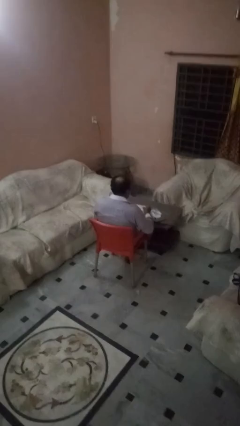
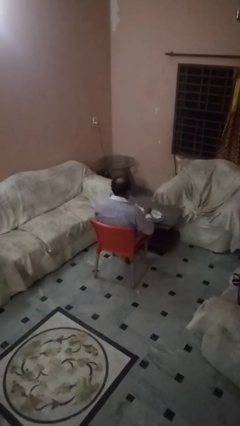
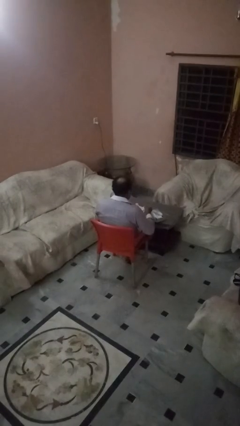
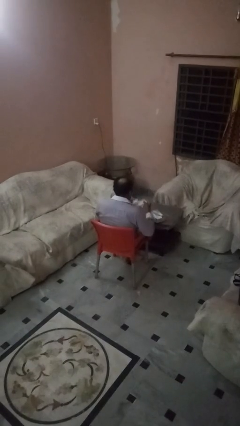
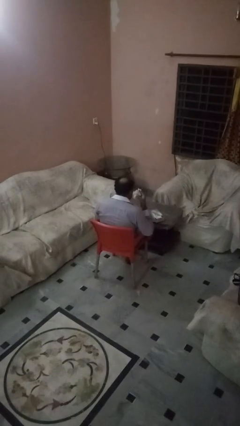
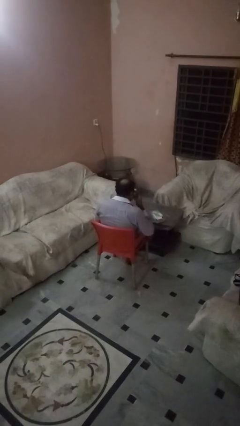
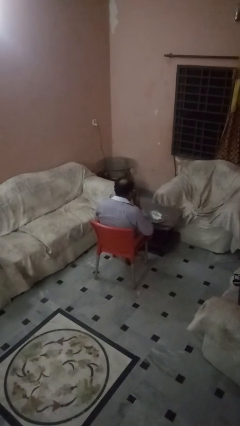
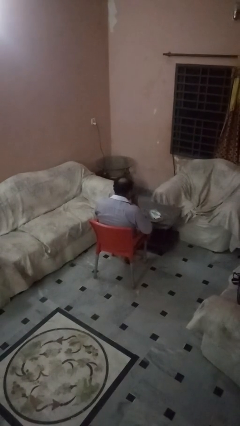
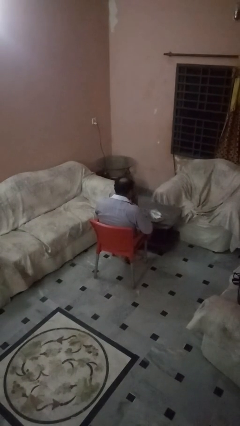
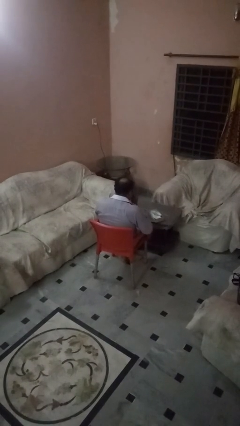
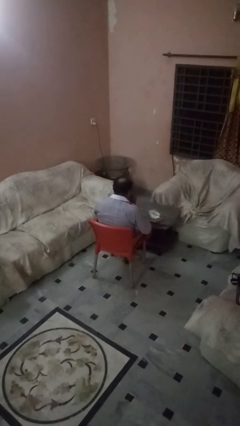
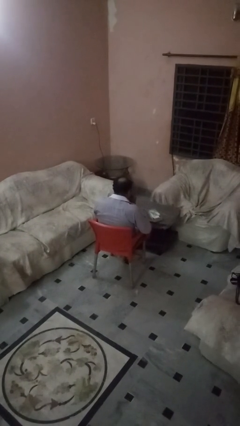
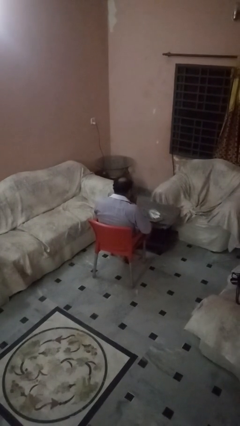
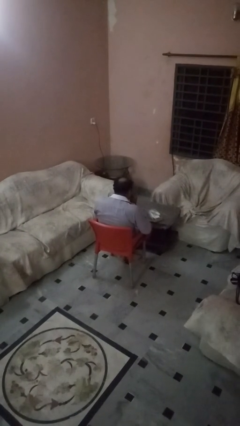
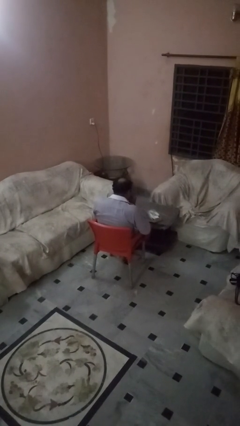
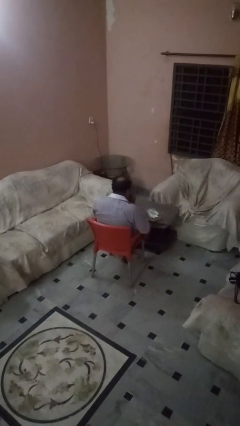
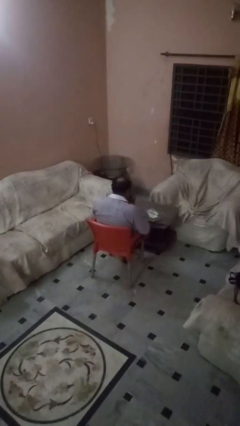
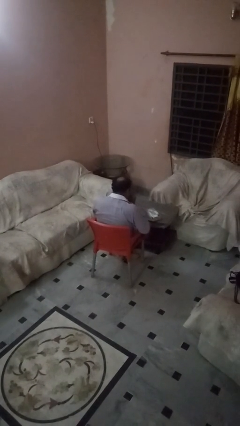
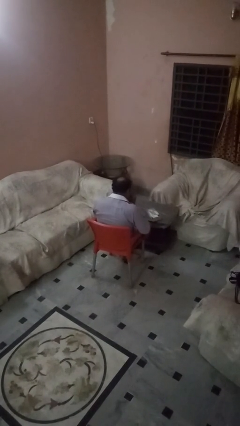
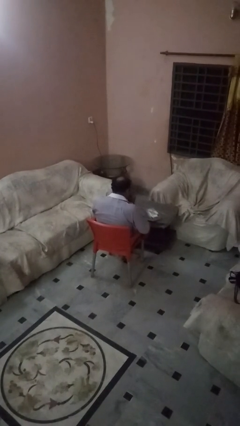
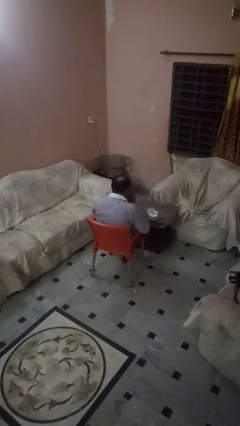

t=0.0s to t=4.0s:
person blows nose

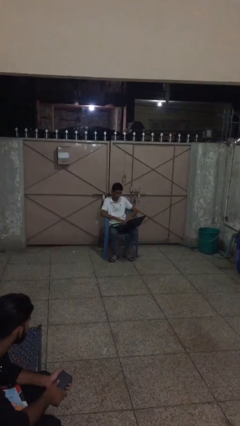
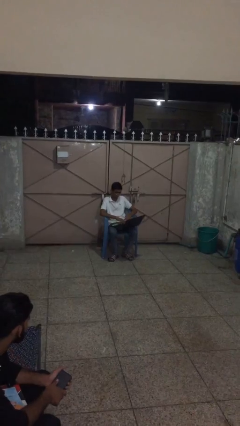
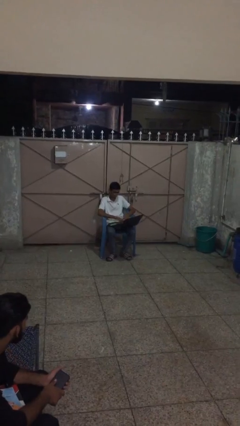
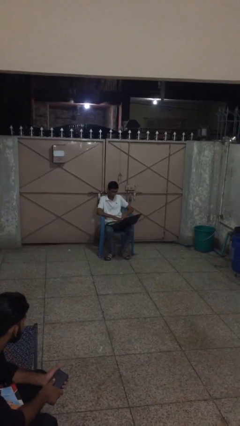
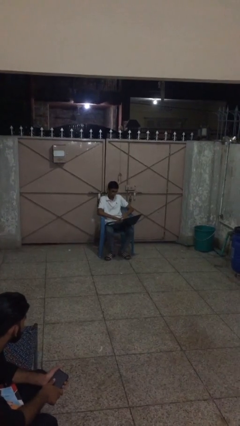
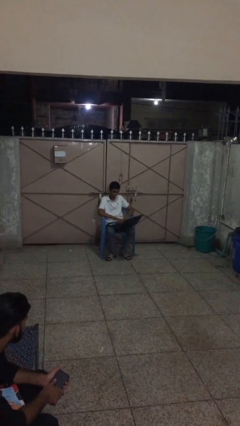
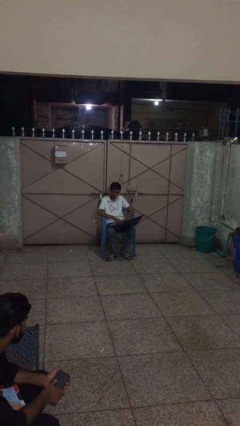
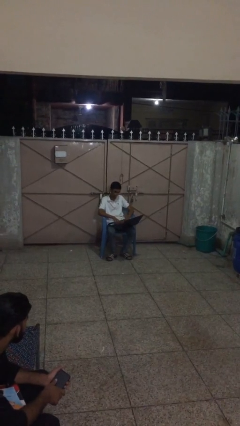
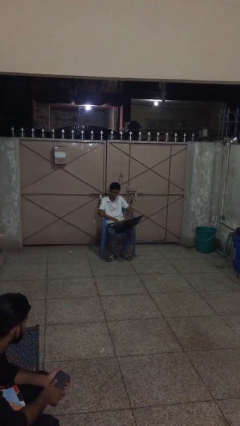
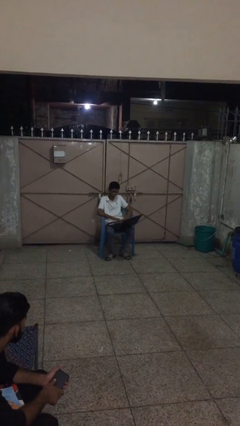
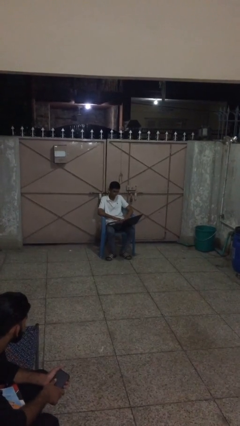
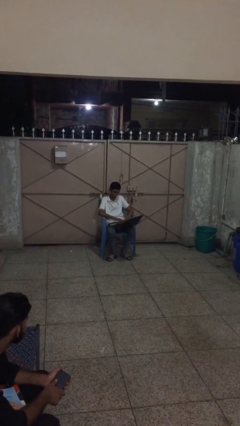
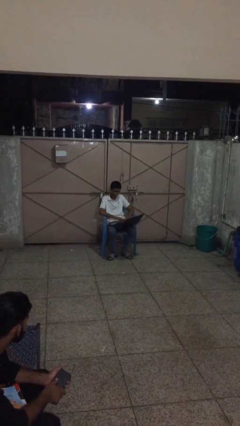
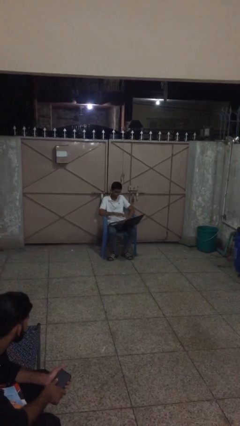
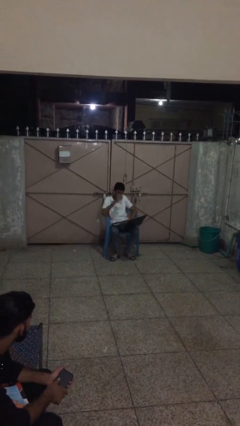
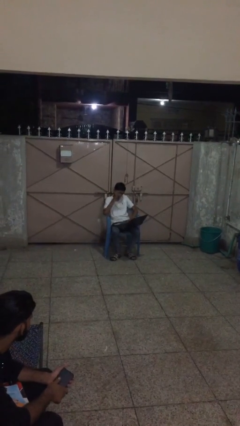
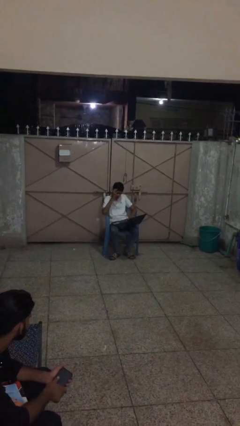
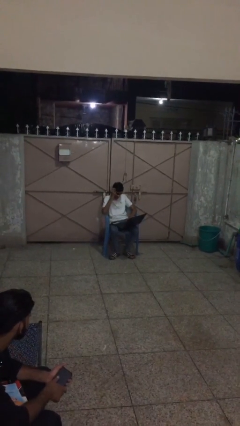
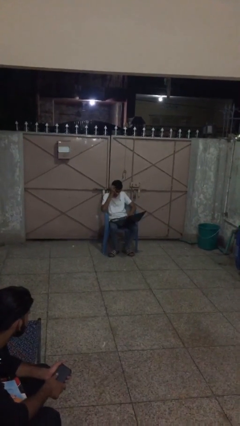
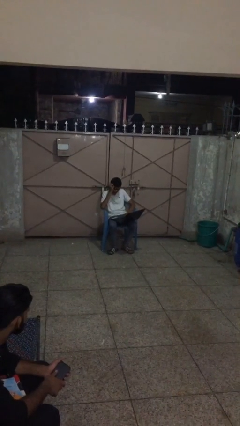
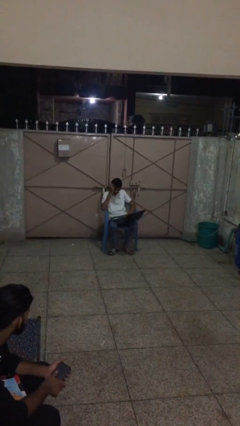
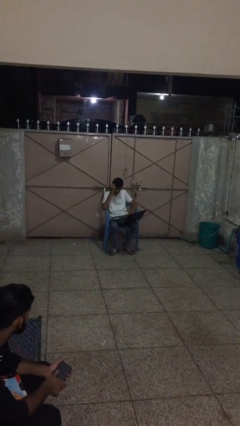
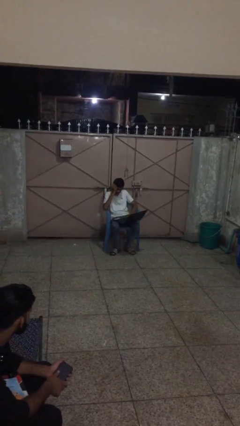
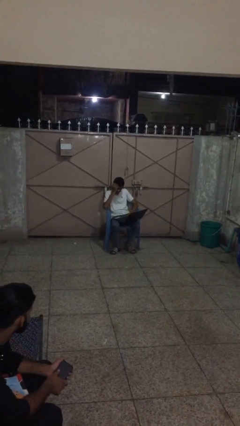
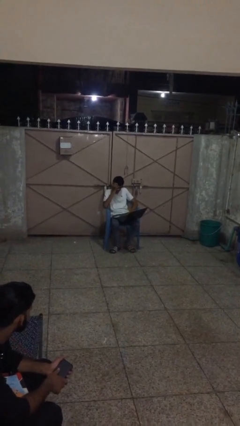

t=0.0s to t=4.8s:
person interacts with laptop

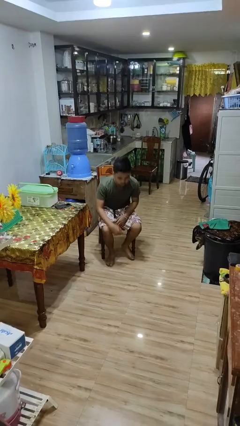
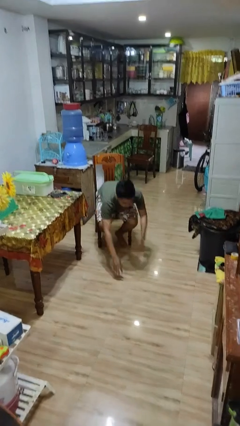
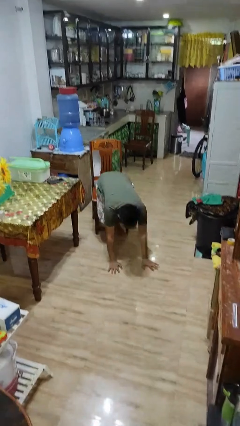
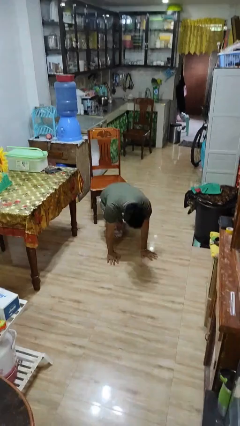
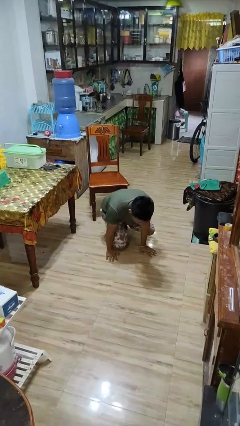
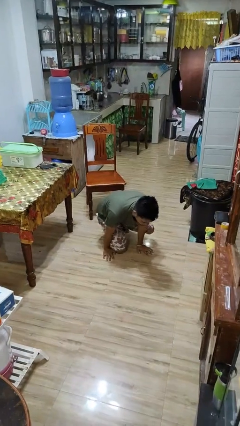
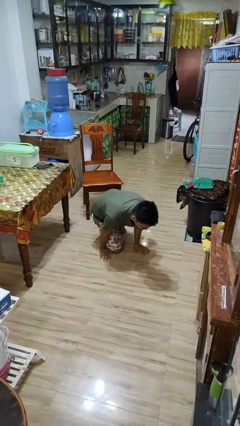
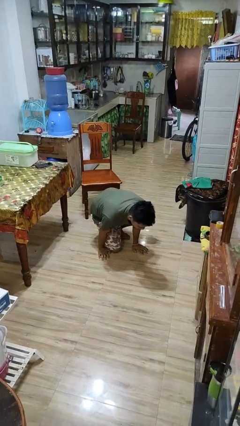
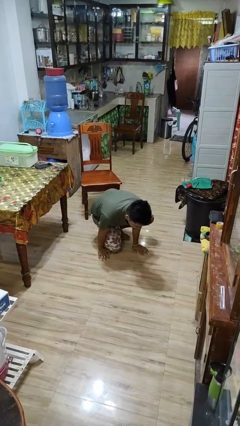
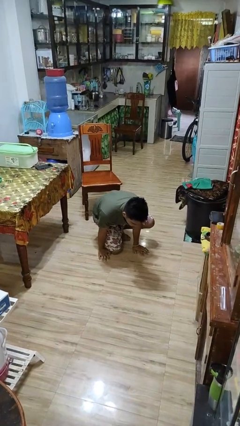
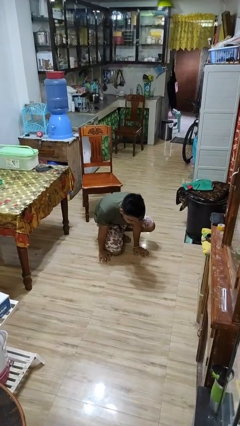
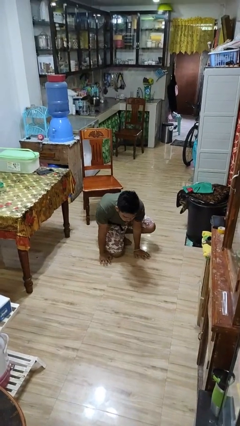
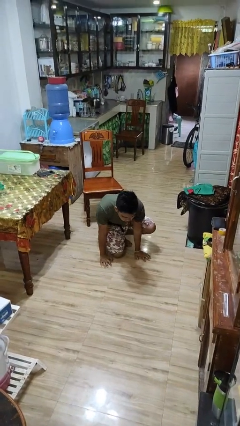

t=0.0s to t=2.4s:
person falls from chair

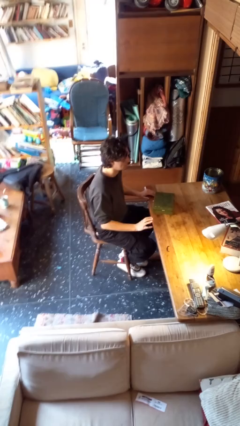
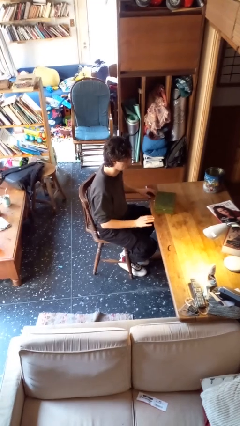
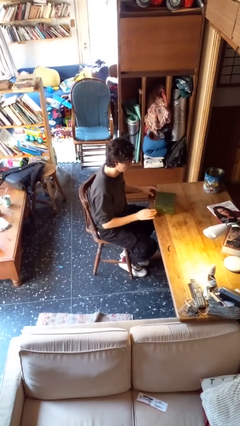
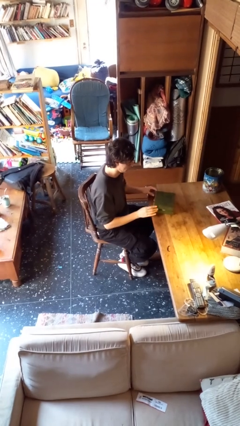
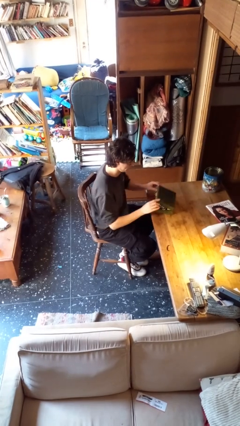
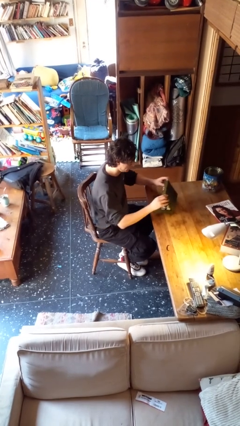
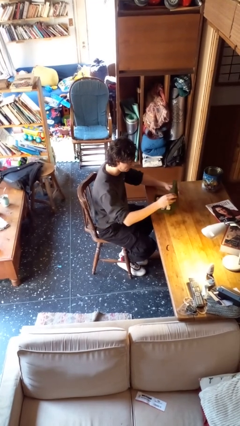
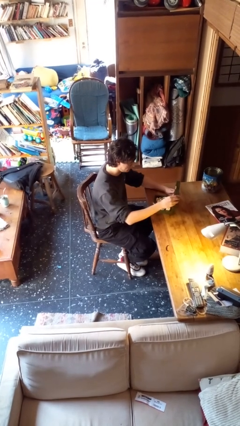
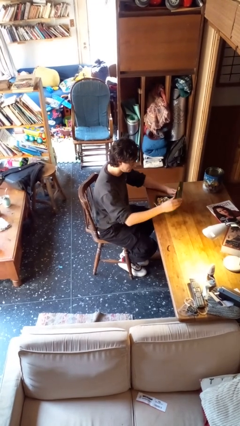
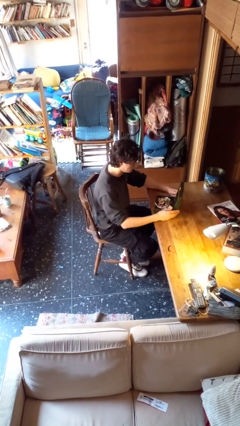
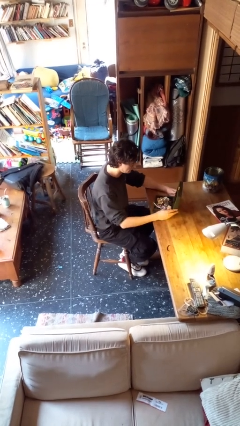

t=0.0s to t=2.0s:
person opens jewelry box

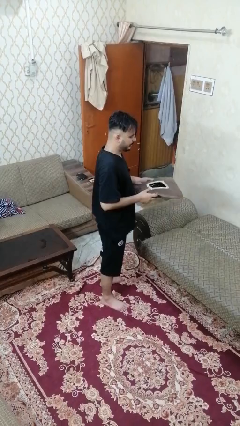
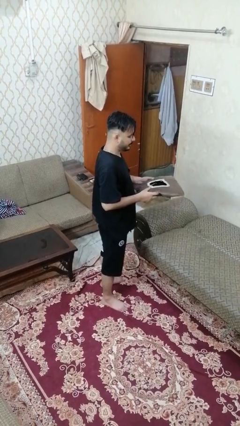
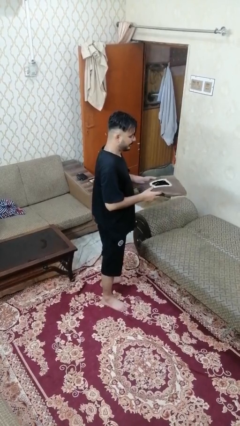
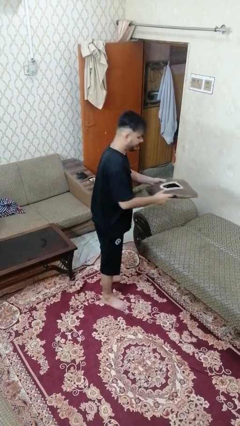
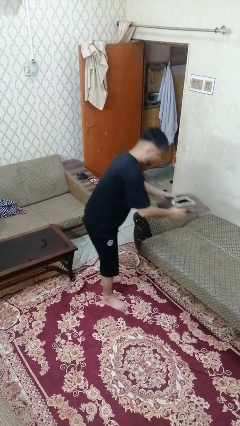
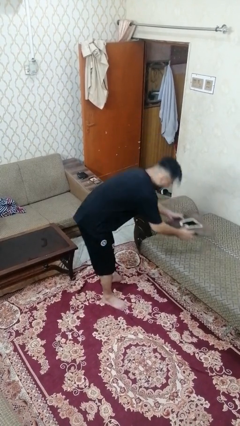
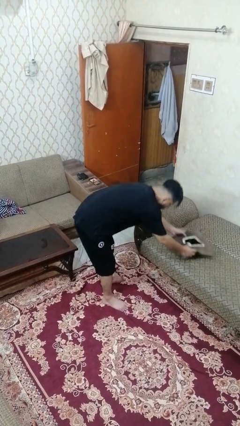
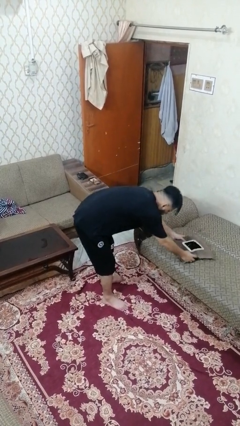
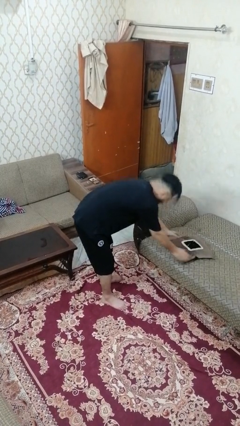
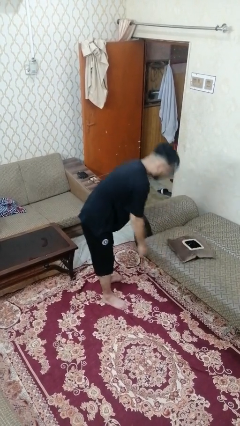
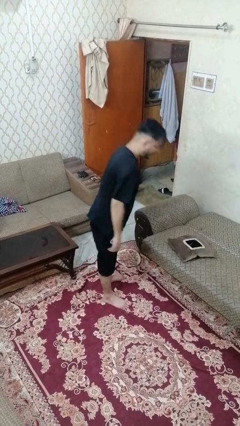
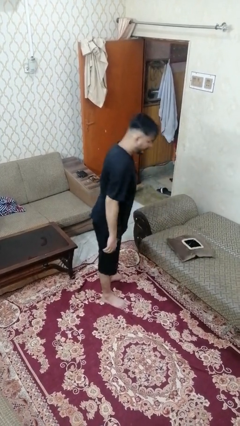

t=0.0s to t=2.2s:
person puts down object on couch

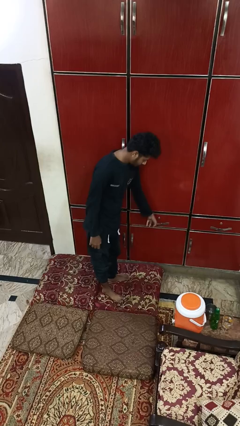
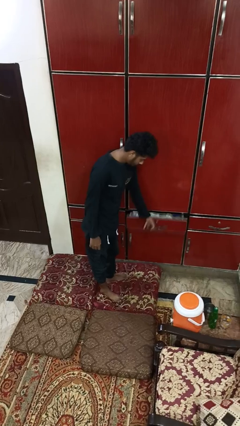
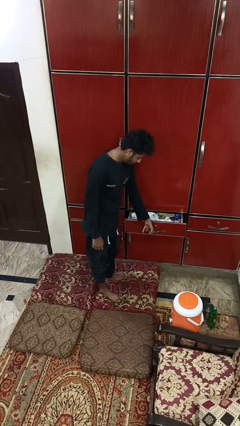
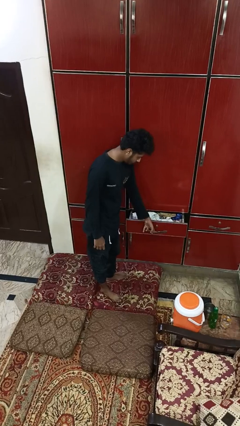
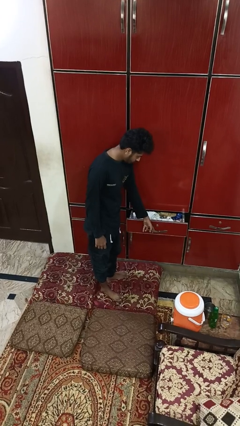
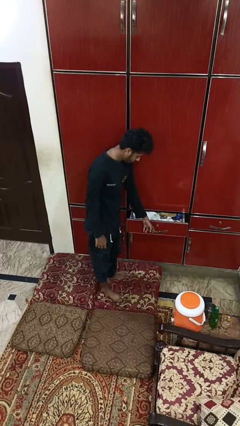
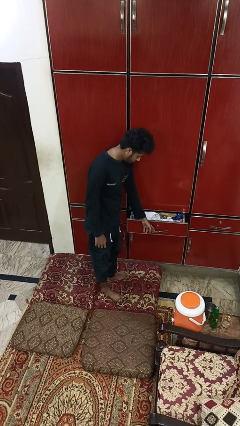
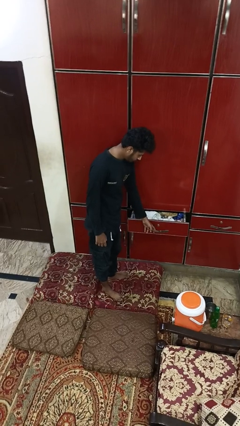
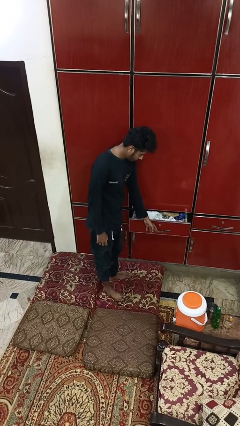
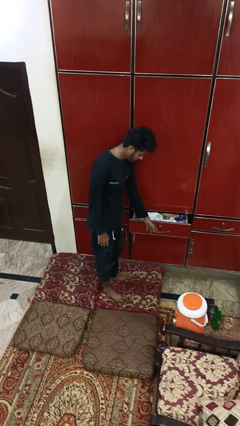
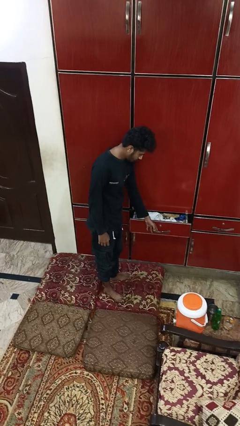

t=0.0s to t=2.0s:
person opens dresser drawer
